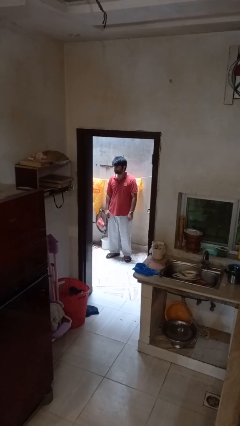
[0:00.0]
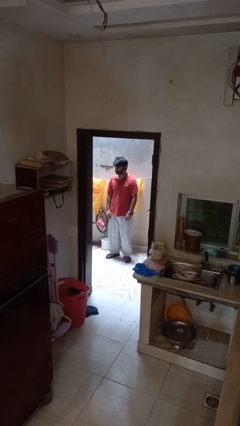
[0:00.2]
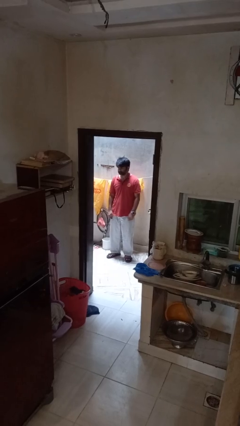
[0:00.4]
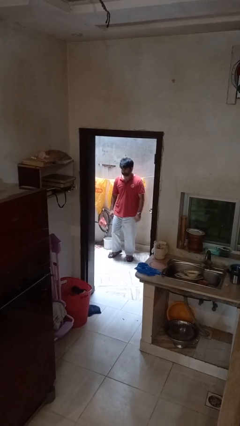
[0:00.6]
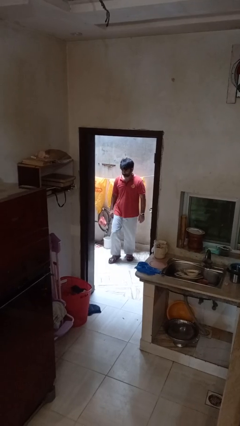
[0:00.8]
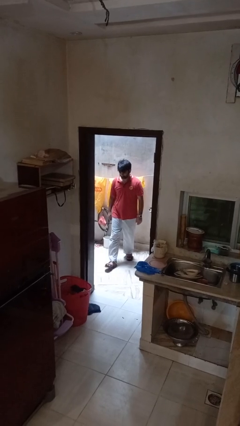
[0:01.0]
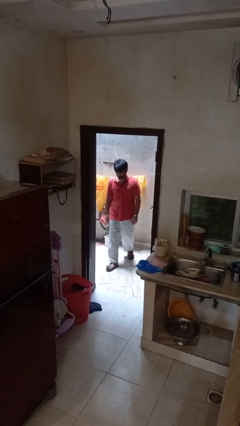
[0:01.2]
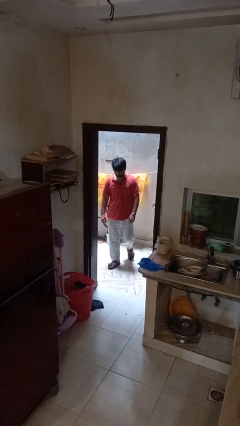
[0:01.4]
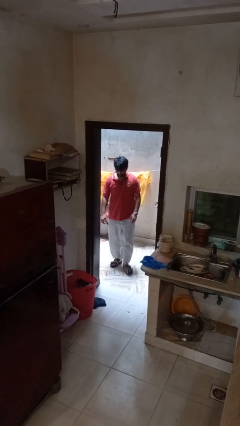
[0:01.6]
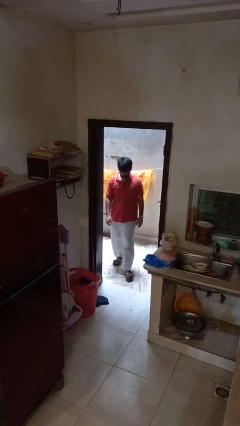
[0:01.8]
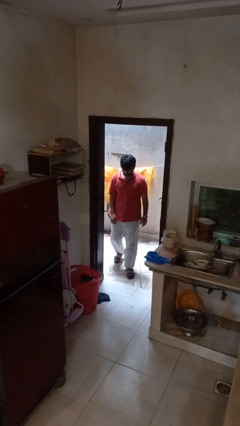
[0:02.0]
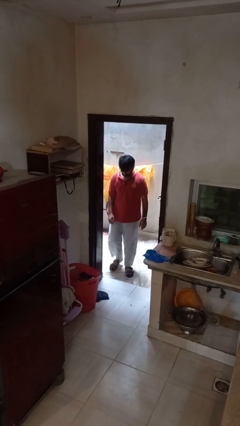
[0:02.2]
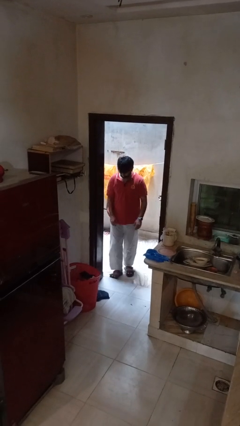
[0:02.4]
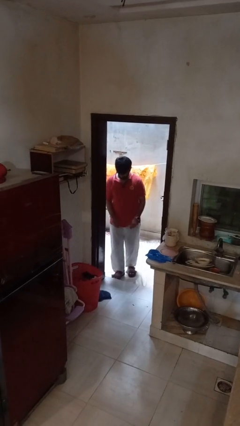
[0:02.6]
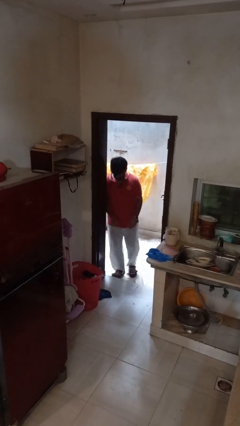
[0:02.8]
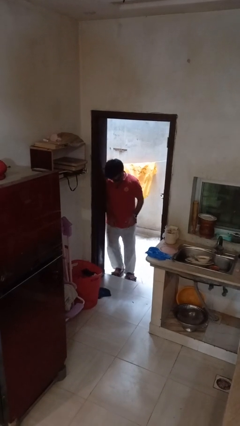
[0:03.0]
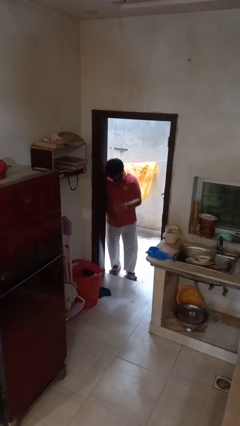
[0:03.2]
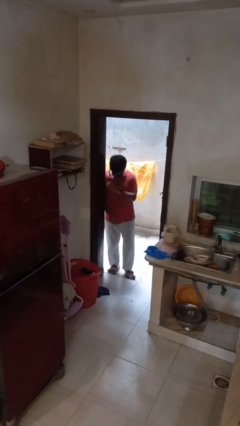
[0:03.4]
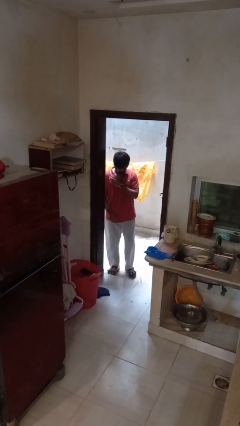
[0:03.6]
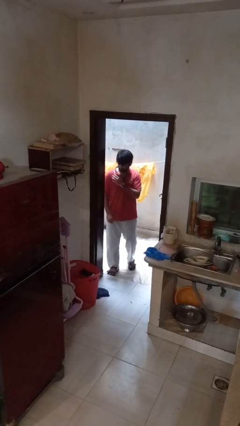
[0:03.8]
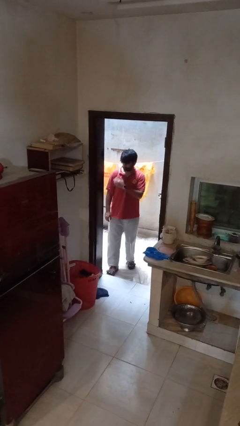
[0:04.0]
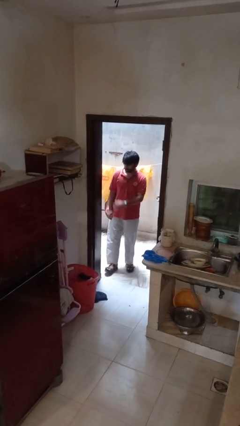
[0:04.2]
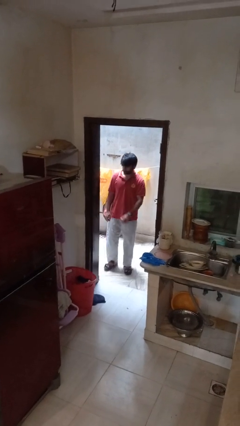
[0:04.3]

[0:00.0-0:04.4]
person bumps into wall

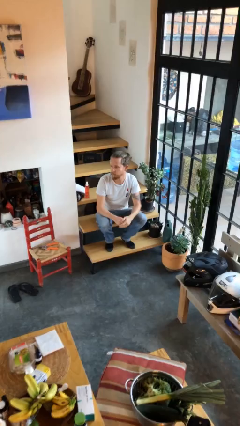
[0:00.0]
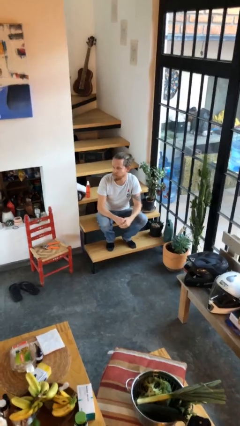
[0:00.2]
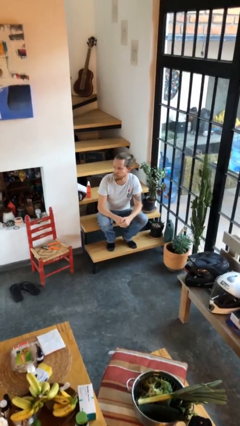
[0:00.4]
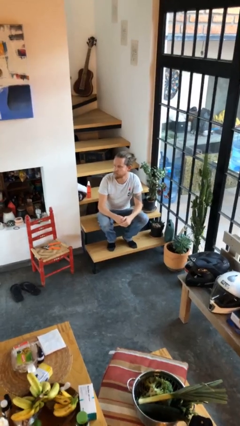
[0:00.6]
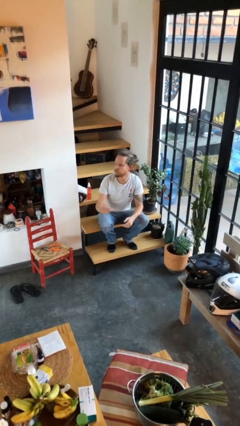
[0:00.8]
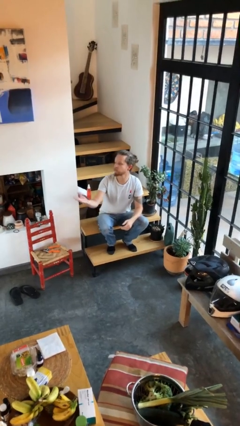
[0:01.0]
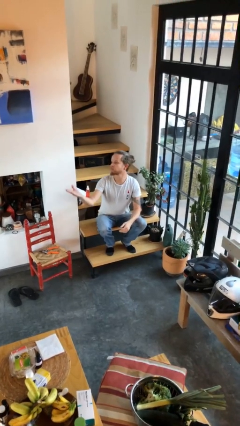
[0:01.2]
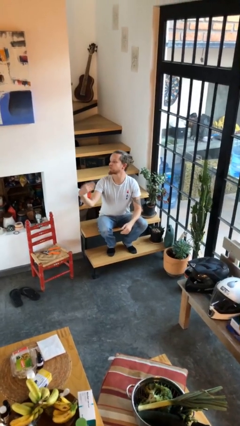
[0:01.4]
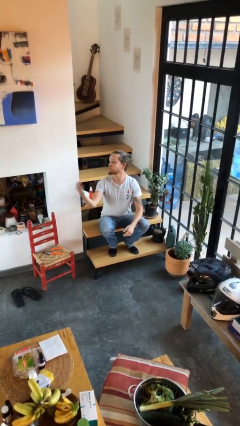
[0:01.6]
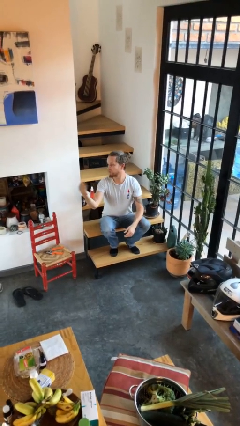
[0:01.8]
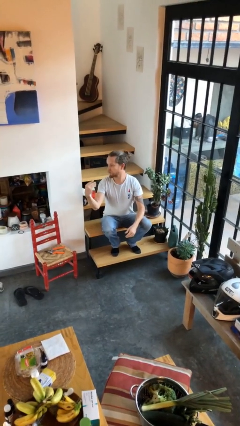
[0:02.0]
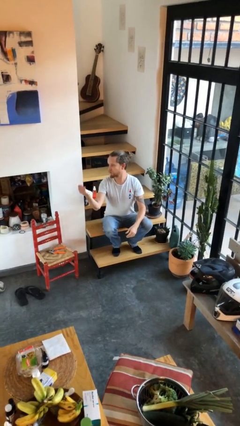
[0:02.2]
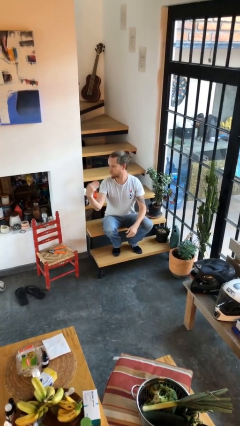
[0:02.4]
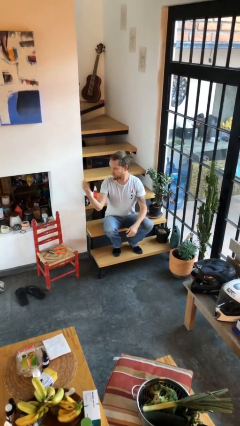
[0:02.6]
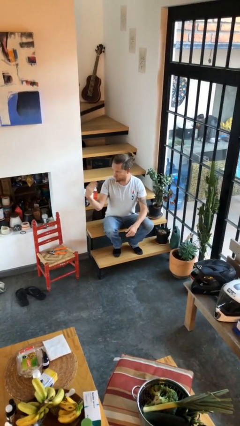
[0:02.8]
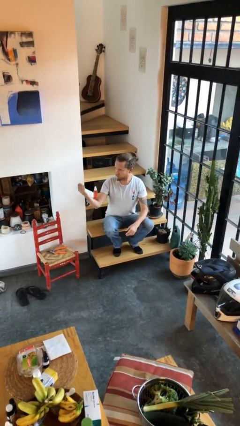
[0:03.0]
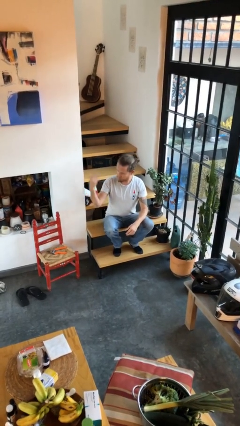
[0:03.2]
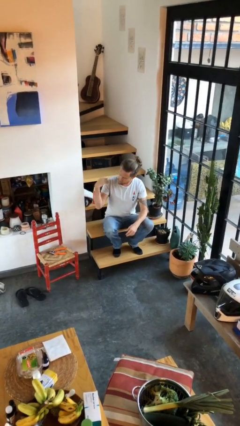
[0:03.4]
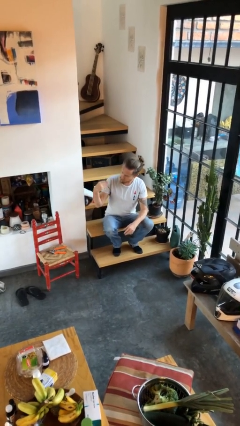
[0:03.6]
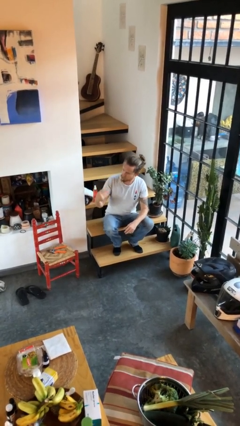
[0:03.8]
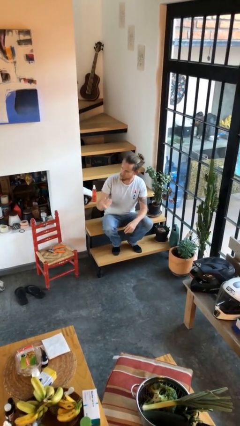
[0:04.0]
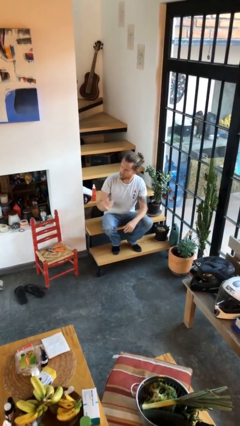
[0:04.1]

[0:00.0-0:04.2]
person gestures come here

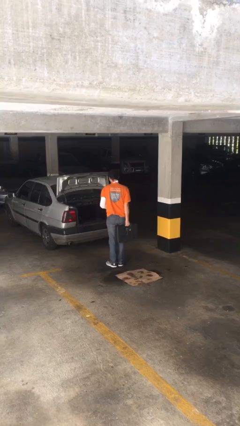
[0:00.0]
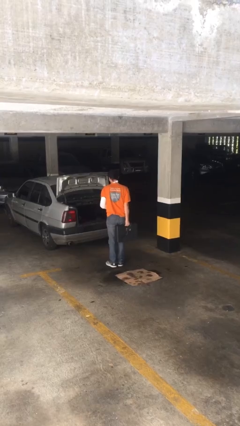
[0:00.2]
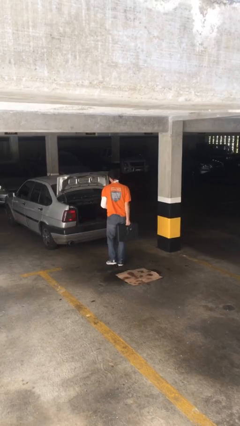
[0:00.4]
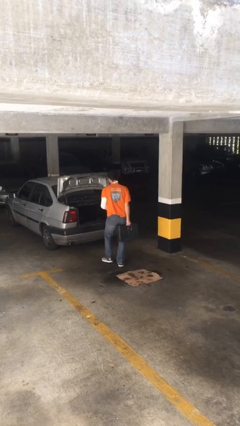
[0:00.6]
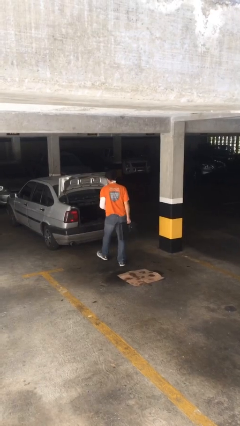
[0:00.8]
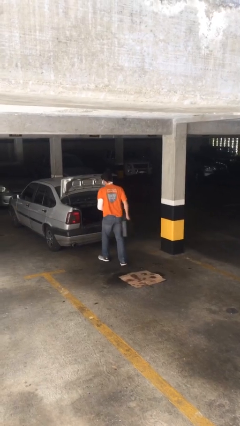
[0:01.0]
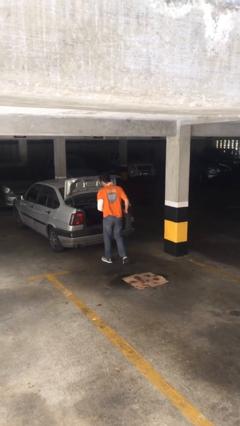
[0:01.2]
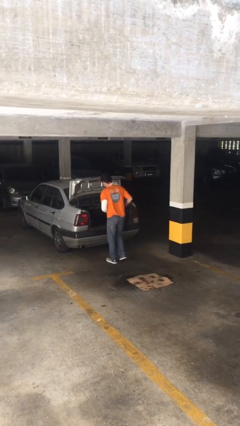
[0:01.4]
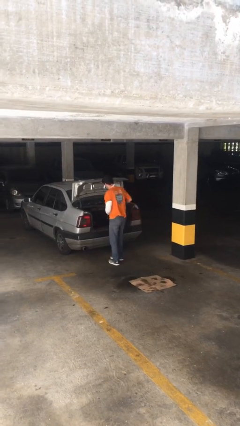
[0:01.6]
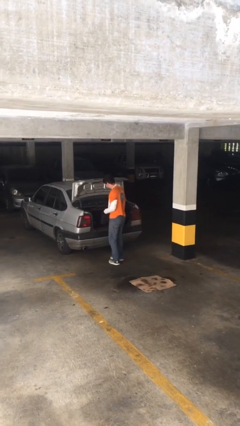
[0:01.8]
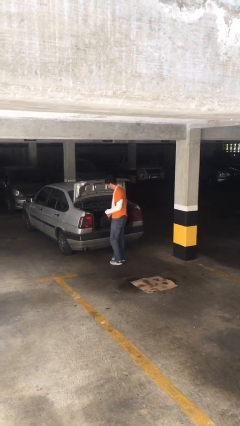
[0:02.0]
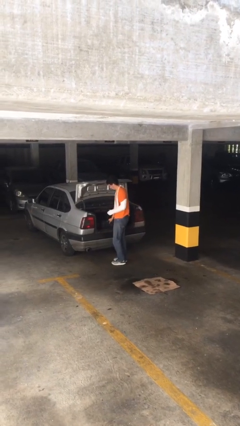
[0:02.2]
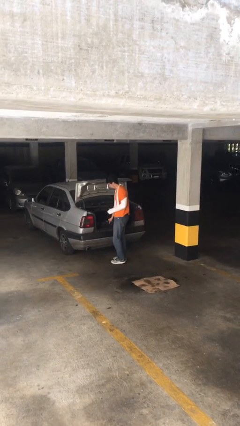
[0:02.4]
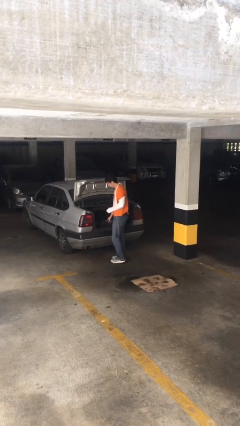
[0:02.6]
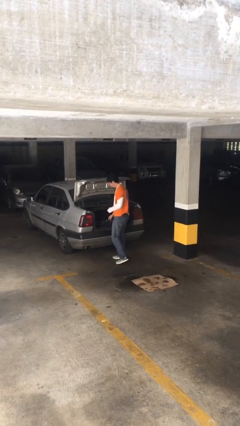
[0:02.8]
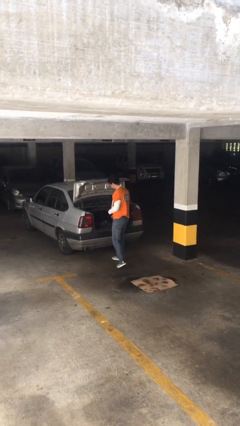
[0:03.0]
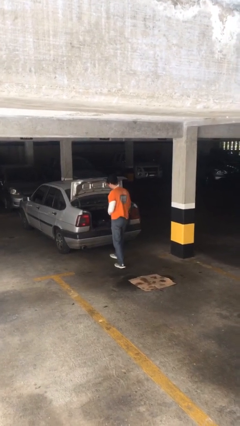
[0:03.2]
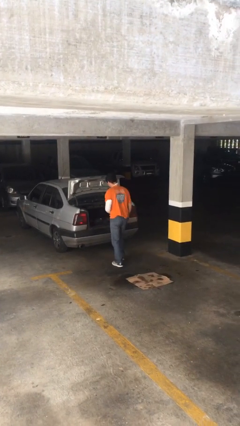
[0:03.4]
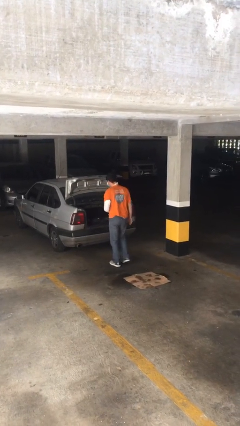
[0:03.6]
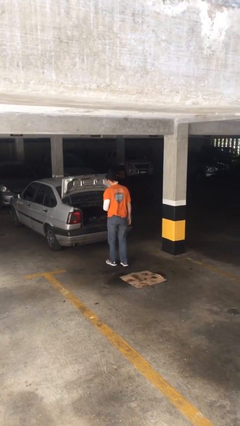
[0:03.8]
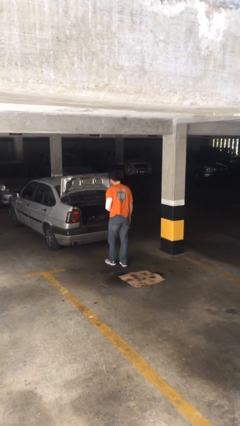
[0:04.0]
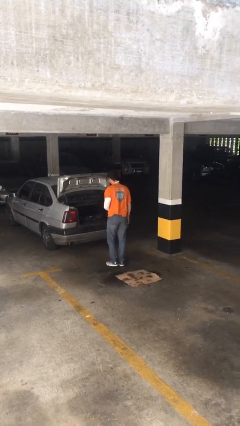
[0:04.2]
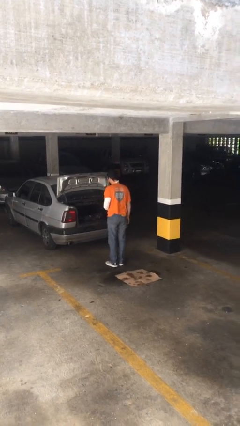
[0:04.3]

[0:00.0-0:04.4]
person loads car

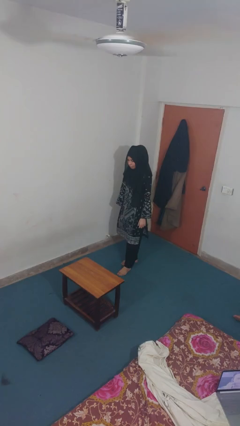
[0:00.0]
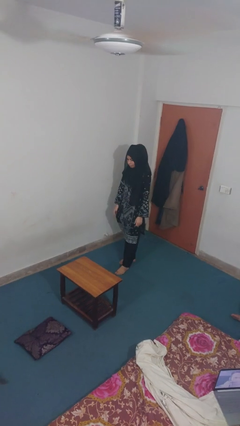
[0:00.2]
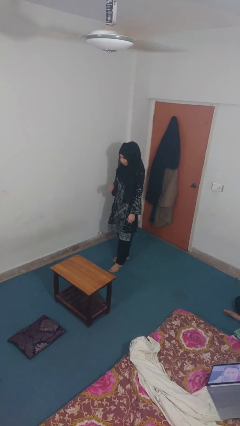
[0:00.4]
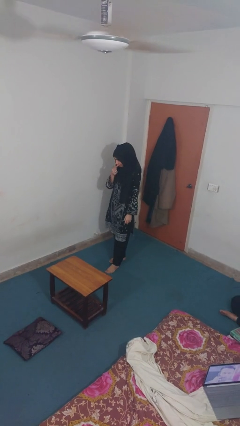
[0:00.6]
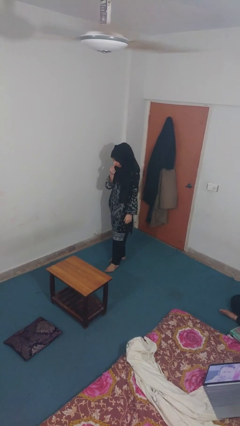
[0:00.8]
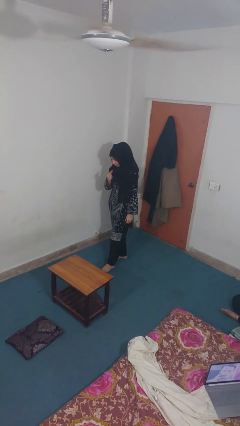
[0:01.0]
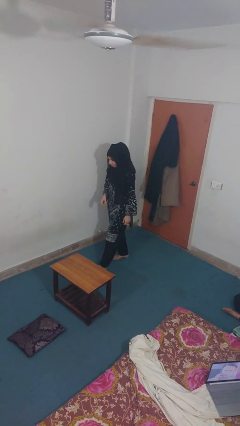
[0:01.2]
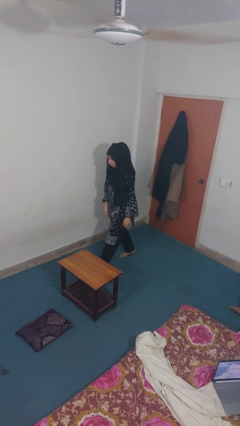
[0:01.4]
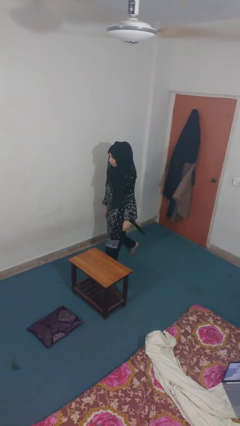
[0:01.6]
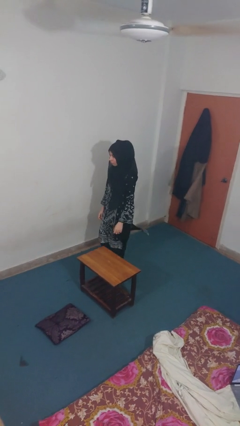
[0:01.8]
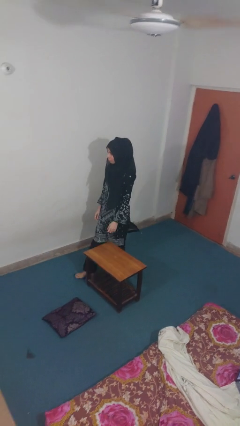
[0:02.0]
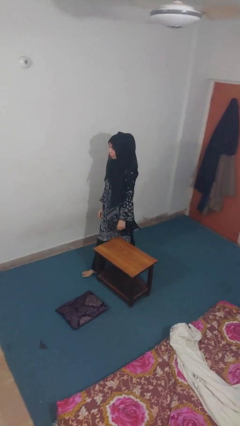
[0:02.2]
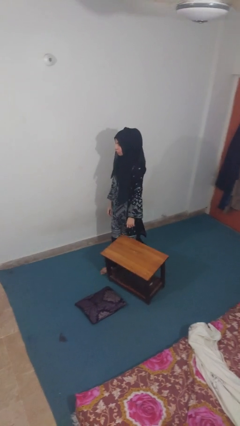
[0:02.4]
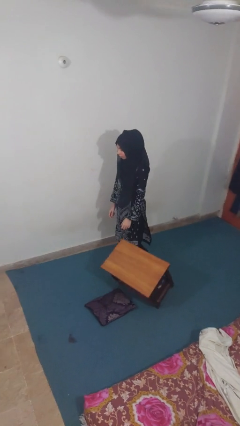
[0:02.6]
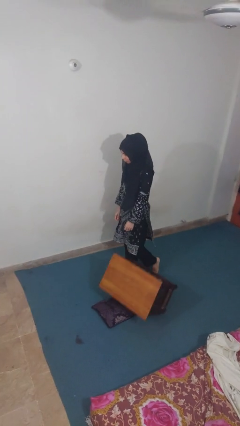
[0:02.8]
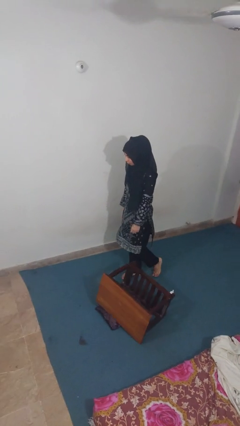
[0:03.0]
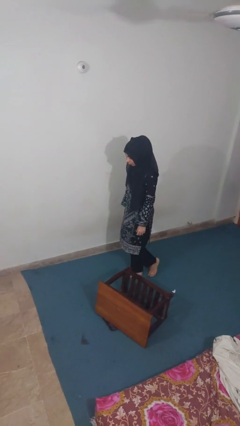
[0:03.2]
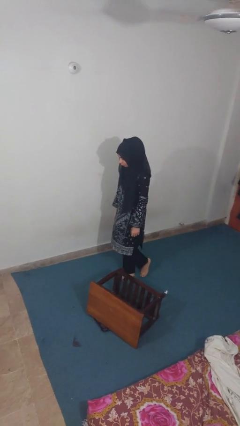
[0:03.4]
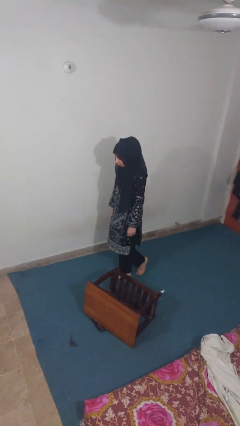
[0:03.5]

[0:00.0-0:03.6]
person knocks over furniture

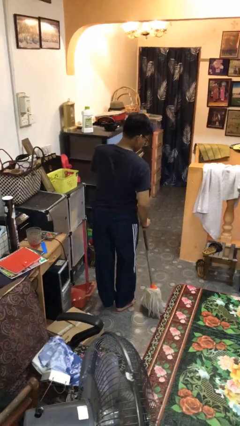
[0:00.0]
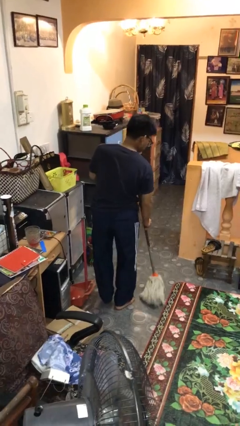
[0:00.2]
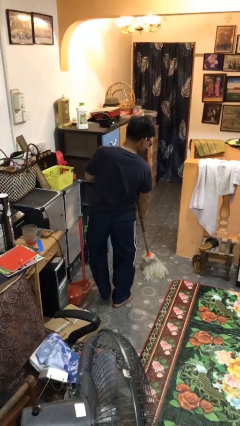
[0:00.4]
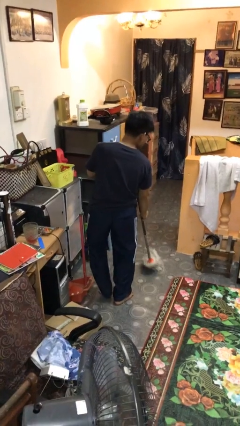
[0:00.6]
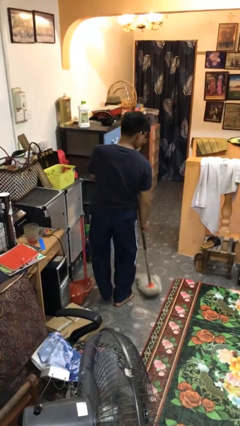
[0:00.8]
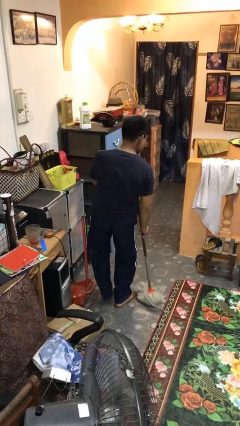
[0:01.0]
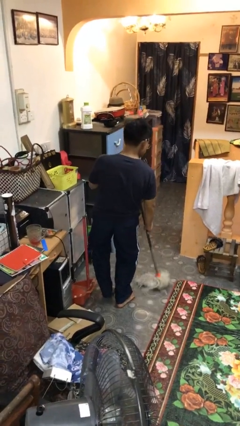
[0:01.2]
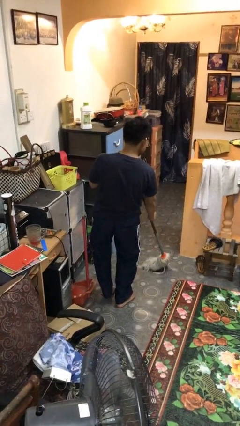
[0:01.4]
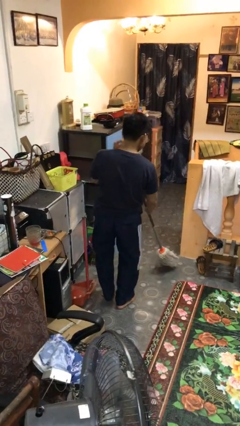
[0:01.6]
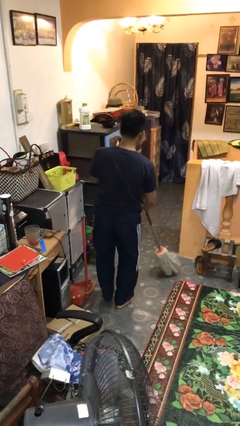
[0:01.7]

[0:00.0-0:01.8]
person mops
